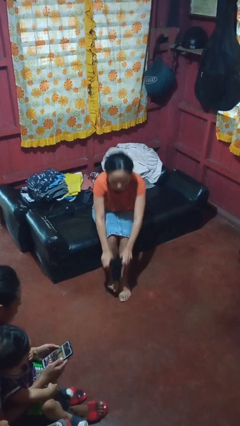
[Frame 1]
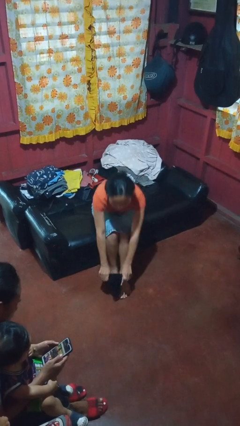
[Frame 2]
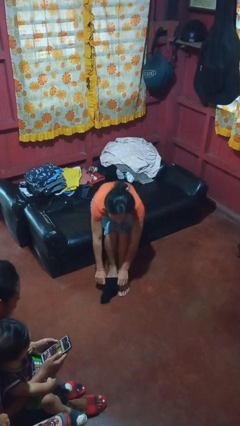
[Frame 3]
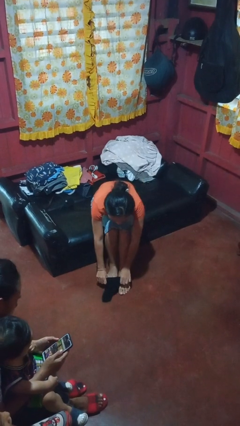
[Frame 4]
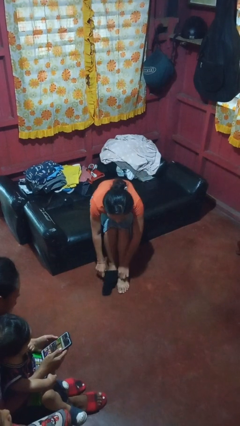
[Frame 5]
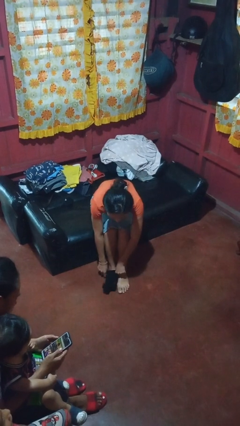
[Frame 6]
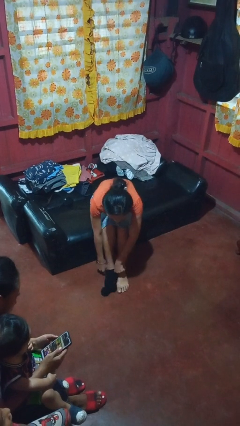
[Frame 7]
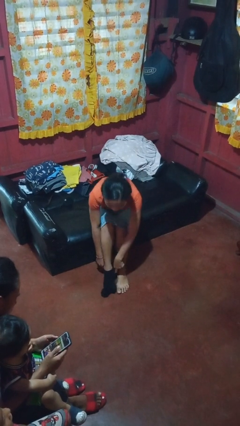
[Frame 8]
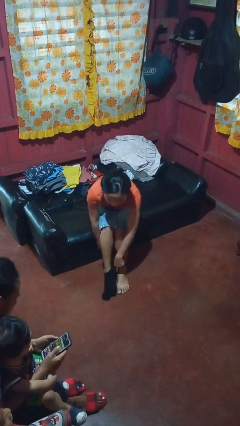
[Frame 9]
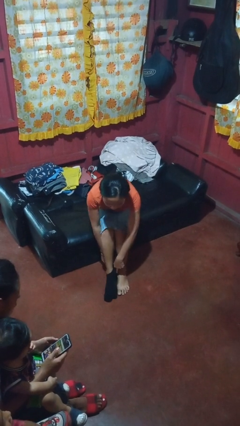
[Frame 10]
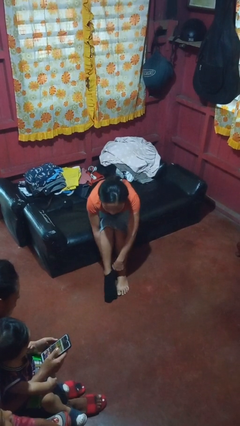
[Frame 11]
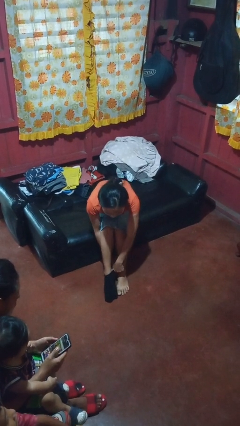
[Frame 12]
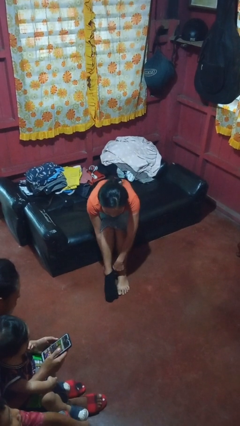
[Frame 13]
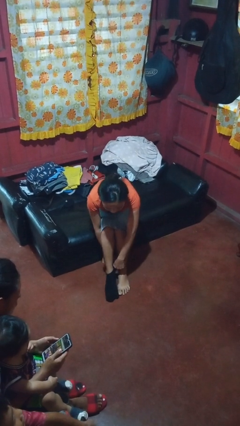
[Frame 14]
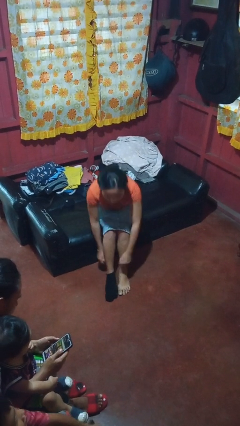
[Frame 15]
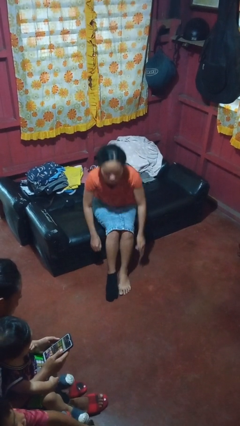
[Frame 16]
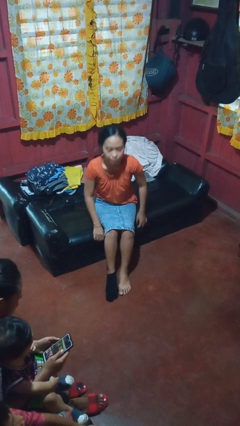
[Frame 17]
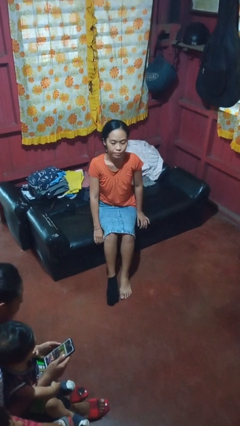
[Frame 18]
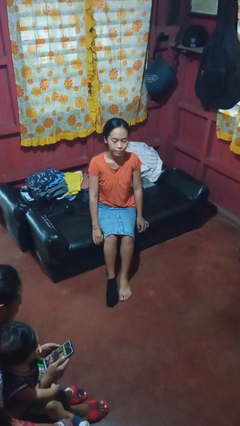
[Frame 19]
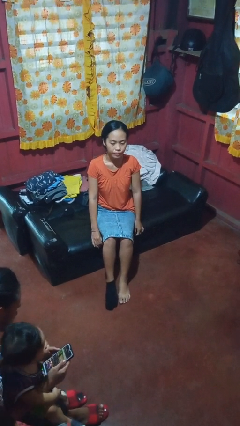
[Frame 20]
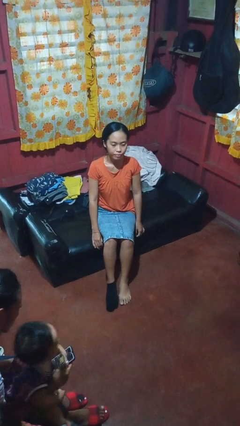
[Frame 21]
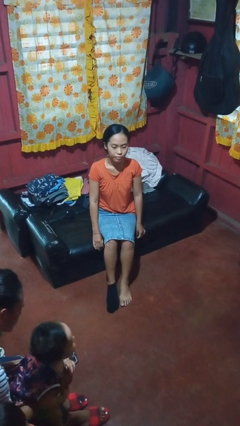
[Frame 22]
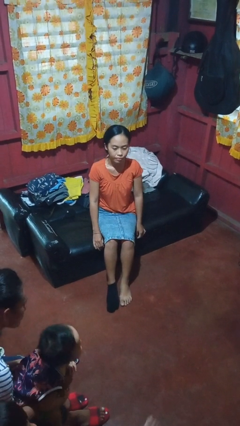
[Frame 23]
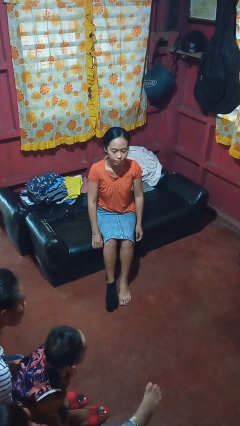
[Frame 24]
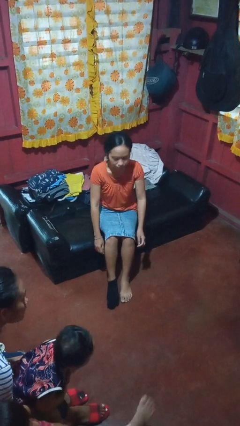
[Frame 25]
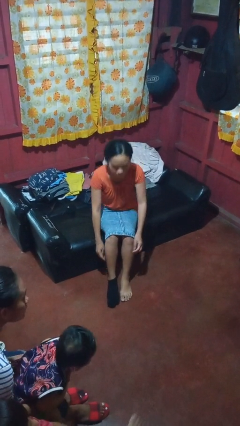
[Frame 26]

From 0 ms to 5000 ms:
person puts on socks

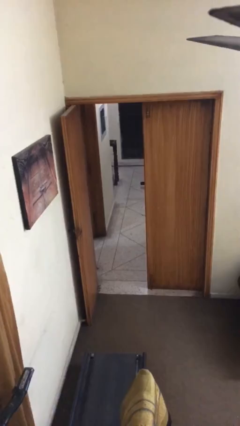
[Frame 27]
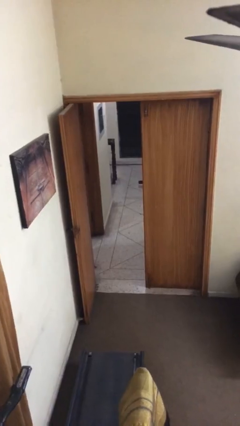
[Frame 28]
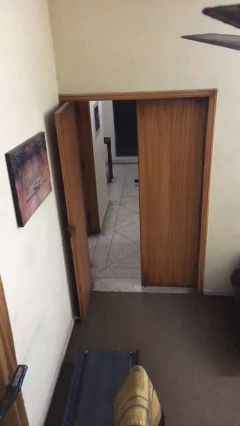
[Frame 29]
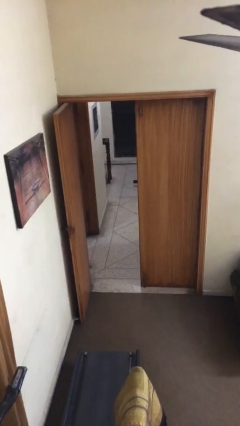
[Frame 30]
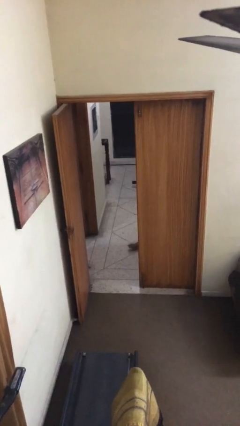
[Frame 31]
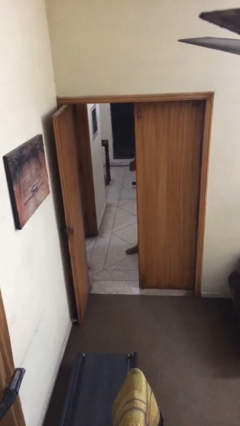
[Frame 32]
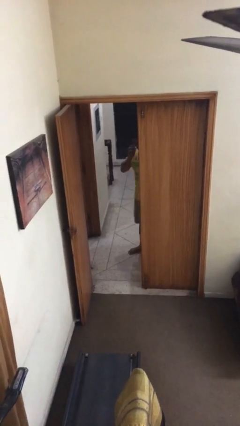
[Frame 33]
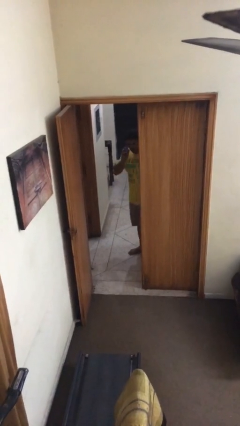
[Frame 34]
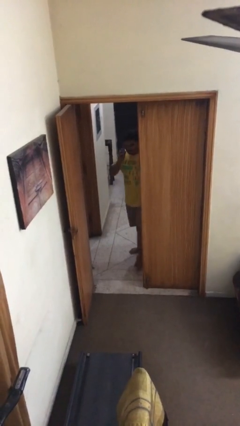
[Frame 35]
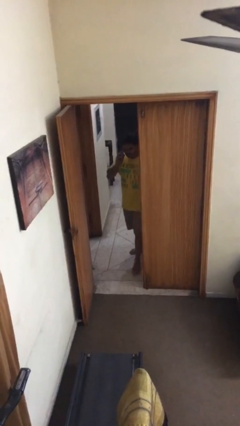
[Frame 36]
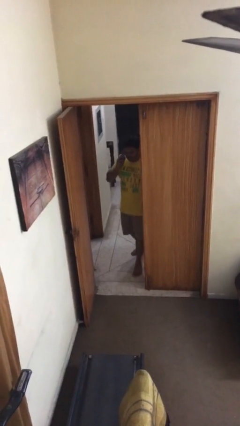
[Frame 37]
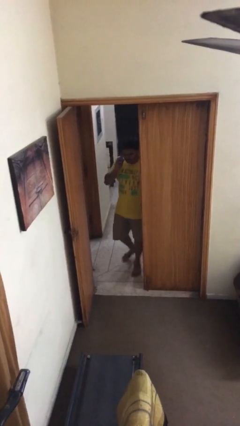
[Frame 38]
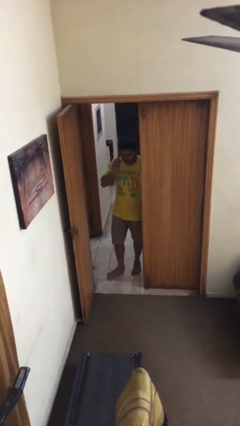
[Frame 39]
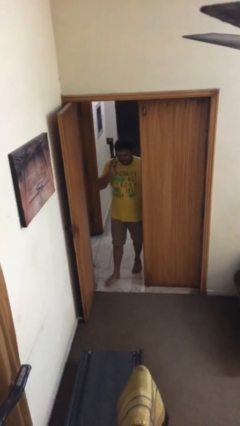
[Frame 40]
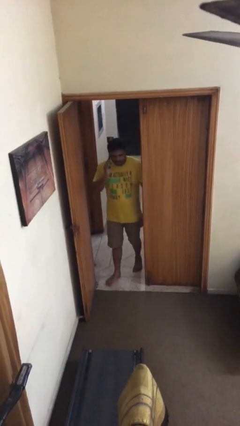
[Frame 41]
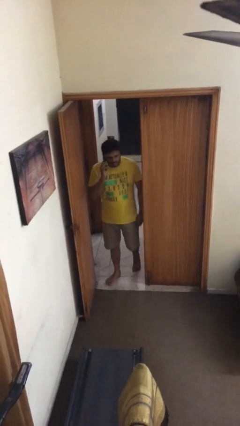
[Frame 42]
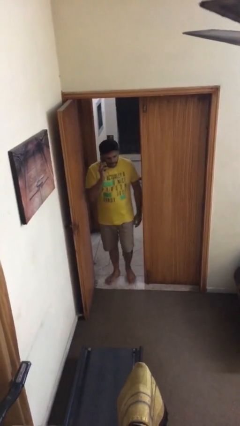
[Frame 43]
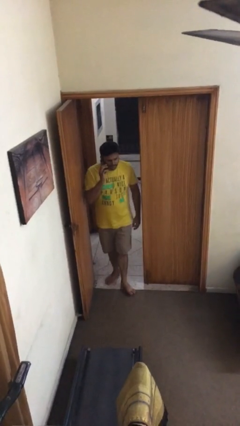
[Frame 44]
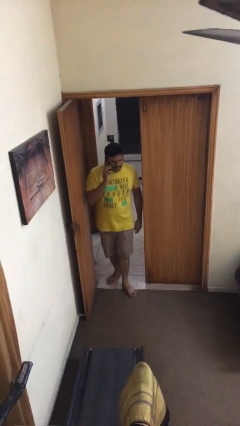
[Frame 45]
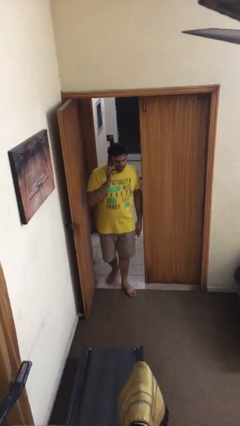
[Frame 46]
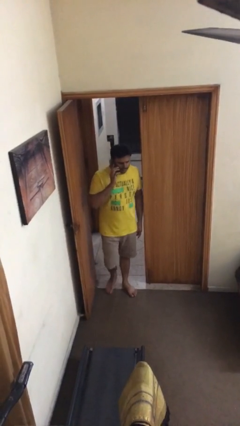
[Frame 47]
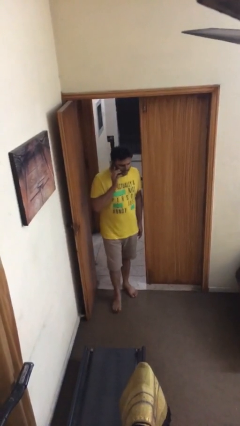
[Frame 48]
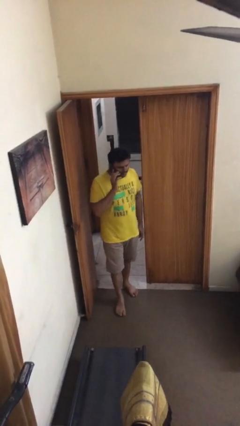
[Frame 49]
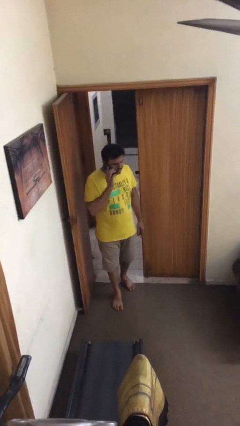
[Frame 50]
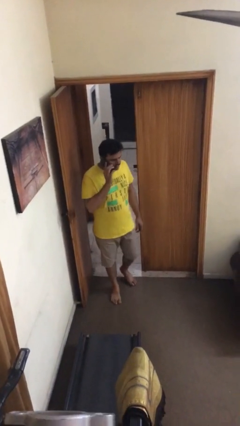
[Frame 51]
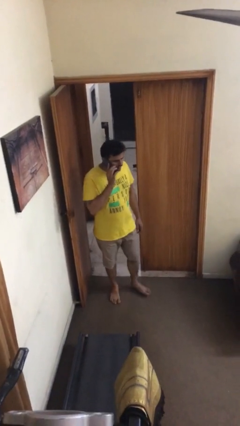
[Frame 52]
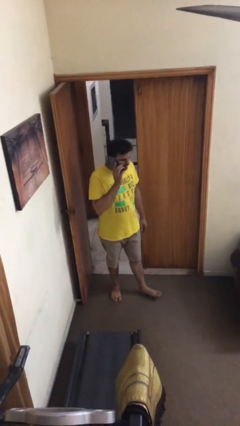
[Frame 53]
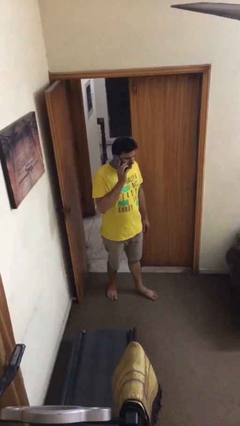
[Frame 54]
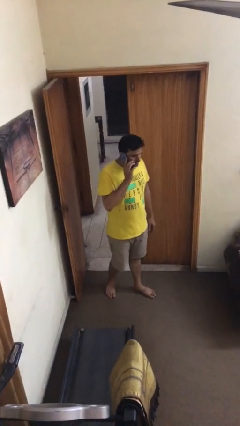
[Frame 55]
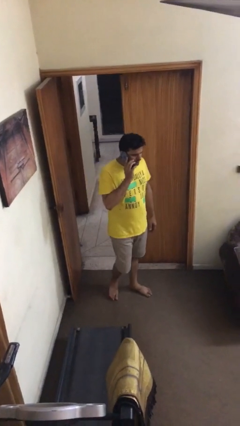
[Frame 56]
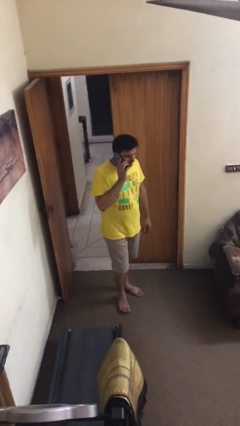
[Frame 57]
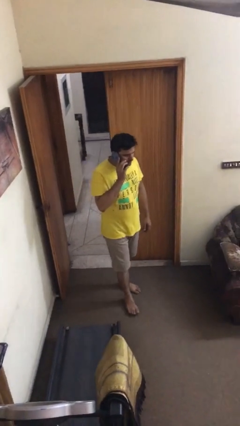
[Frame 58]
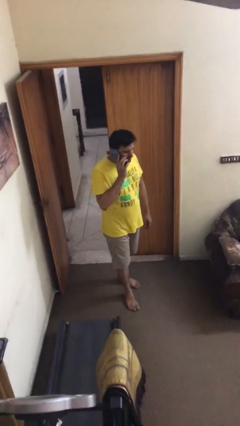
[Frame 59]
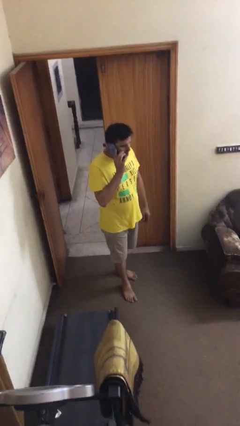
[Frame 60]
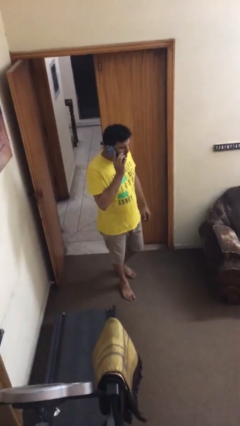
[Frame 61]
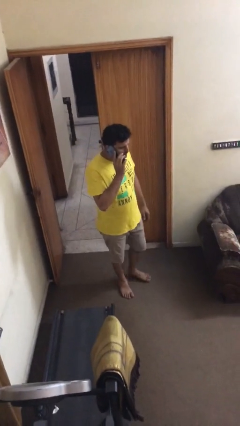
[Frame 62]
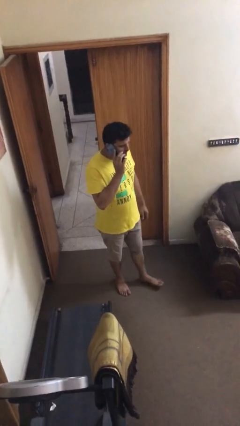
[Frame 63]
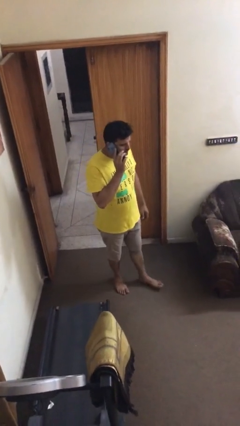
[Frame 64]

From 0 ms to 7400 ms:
person enters scene through structure

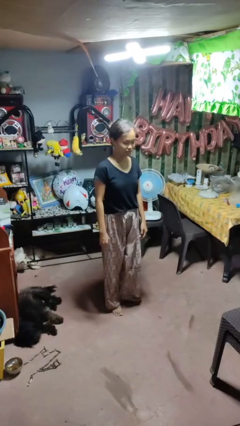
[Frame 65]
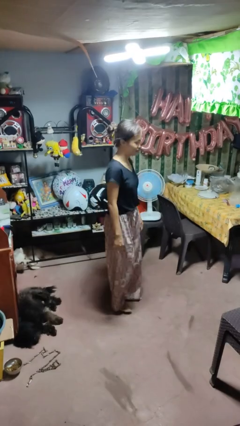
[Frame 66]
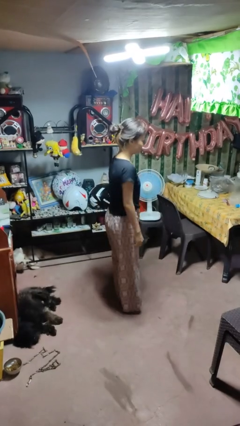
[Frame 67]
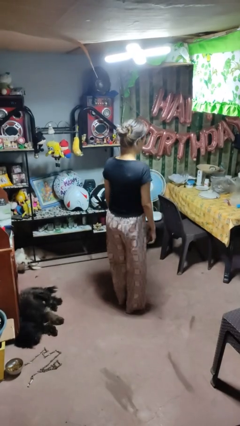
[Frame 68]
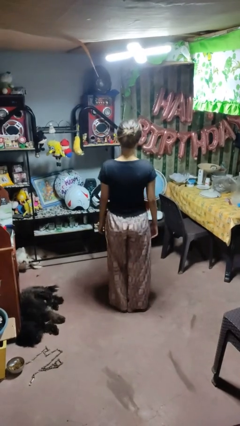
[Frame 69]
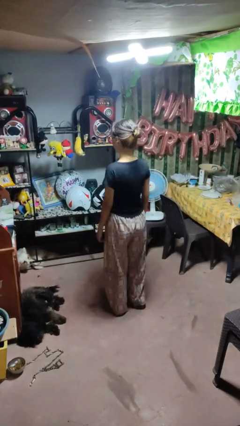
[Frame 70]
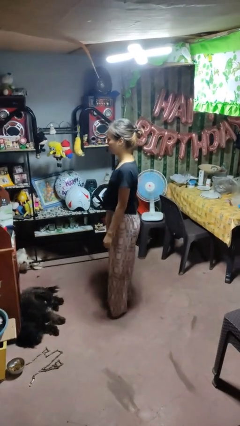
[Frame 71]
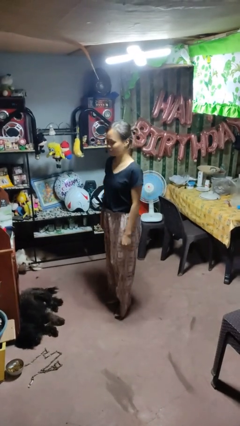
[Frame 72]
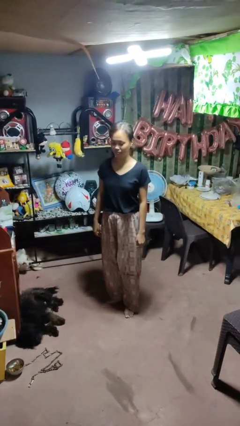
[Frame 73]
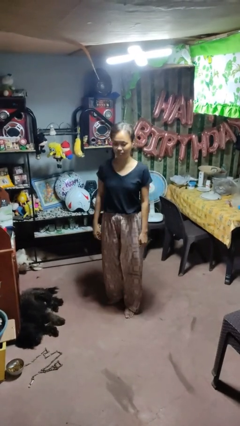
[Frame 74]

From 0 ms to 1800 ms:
person twirls

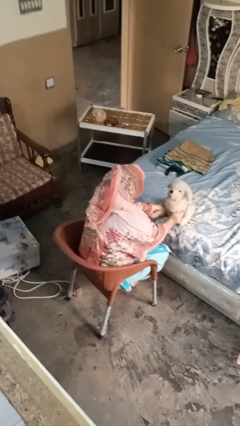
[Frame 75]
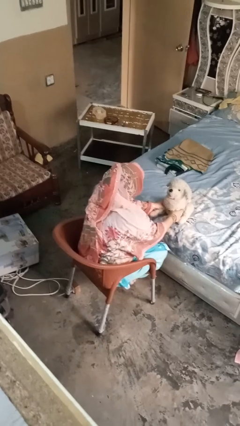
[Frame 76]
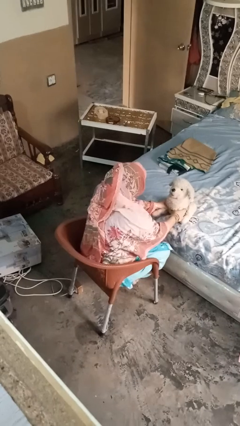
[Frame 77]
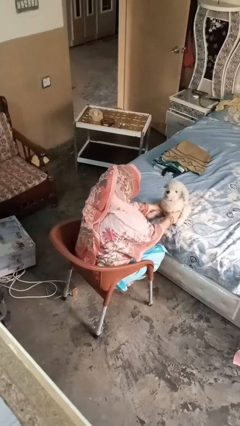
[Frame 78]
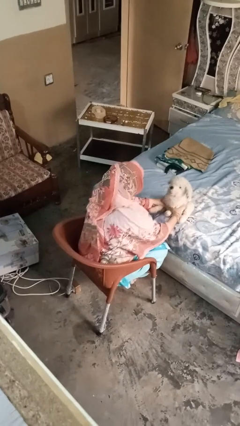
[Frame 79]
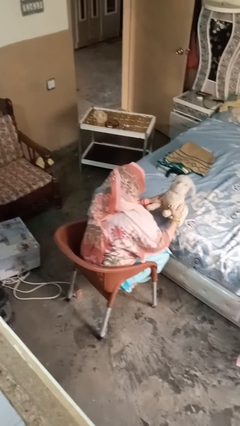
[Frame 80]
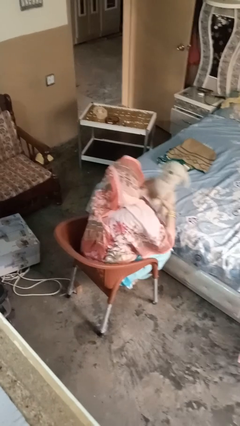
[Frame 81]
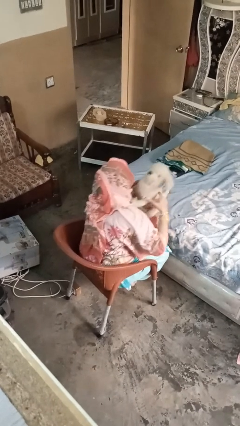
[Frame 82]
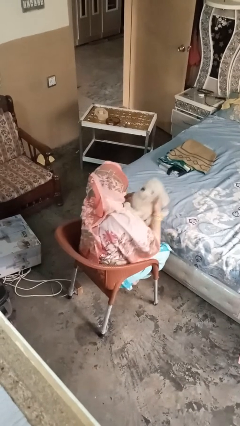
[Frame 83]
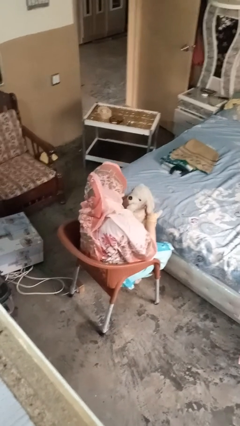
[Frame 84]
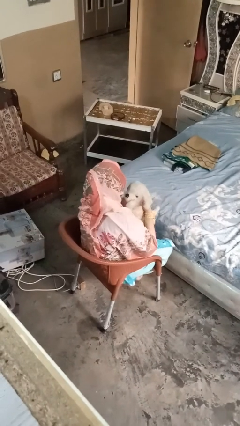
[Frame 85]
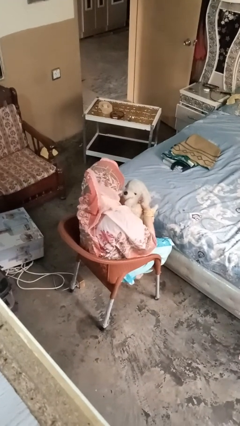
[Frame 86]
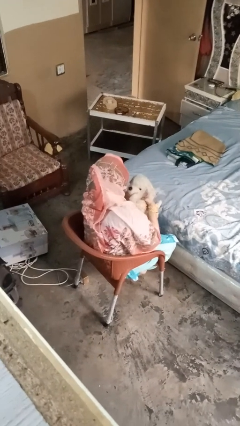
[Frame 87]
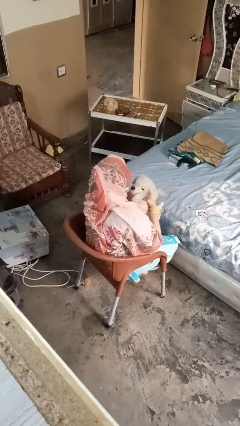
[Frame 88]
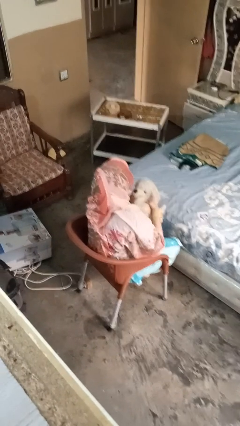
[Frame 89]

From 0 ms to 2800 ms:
person hugs stuffed animal

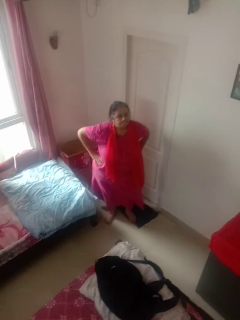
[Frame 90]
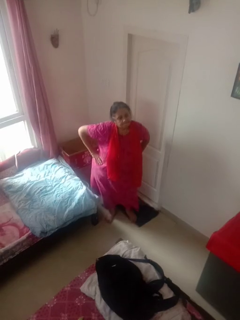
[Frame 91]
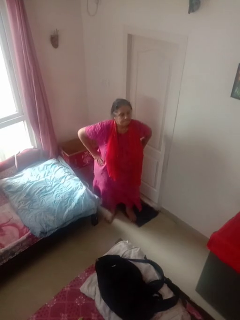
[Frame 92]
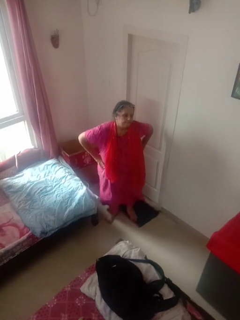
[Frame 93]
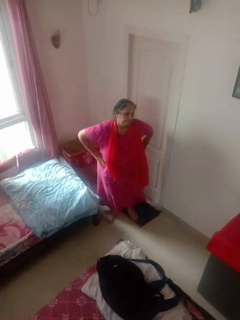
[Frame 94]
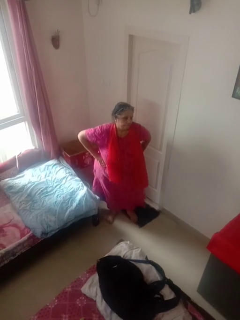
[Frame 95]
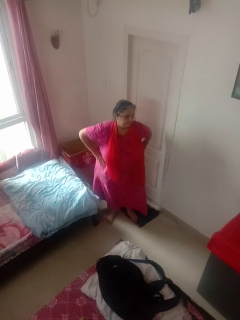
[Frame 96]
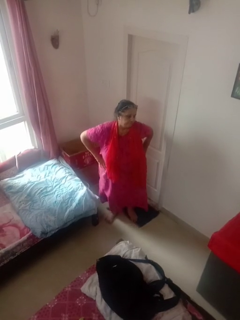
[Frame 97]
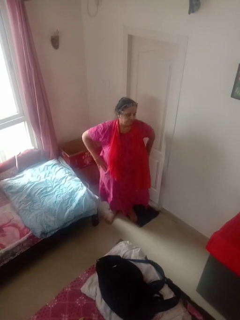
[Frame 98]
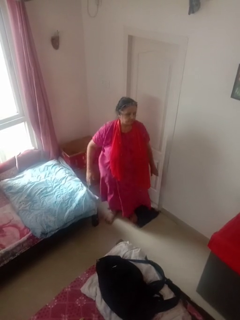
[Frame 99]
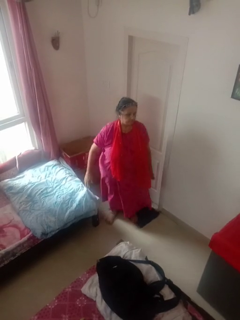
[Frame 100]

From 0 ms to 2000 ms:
person wiggles hips
